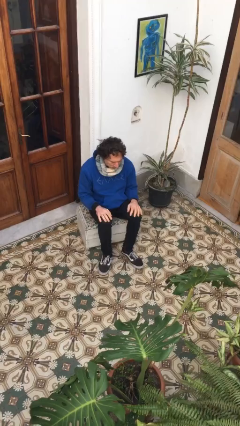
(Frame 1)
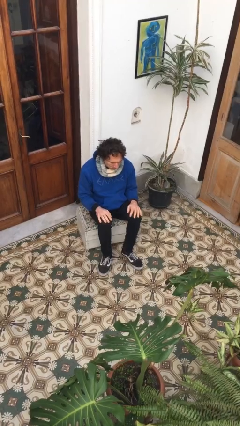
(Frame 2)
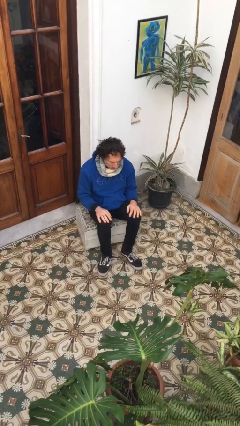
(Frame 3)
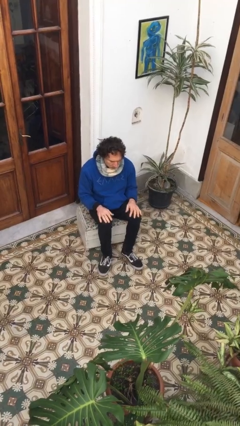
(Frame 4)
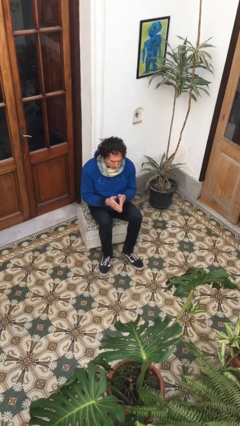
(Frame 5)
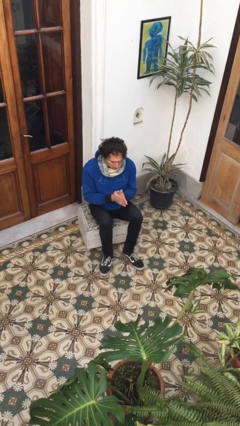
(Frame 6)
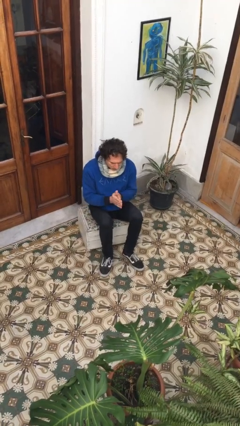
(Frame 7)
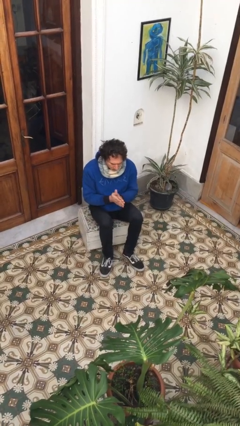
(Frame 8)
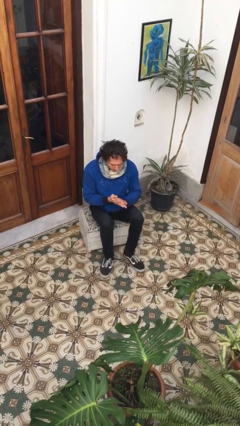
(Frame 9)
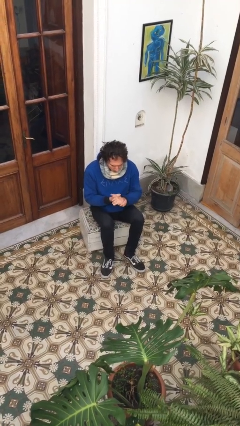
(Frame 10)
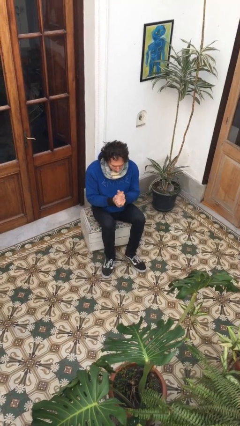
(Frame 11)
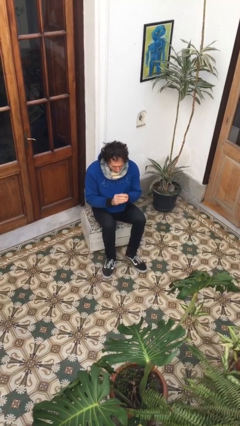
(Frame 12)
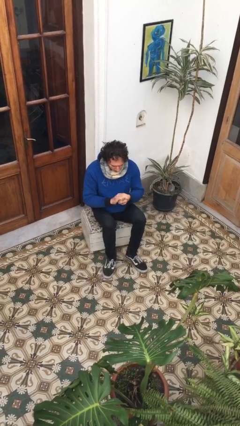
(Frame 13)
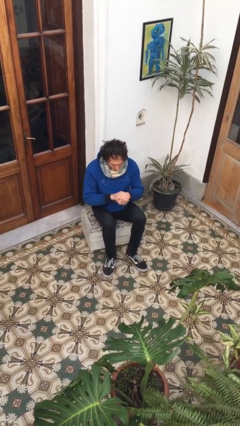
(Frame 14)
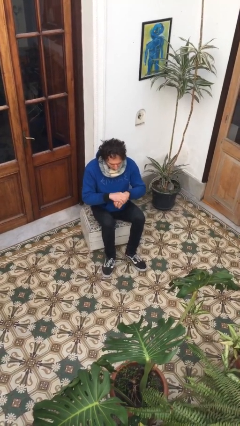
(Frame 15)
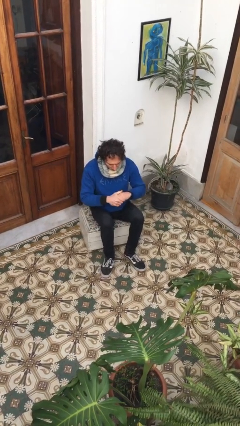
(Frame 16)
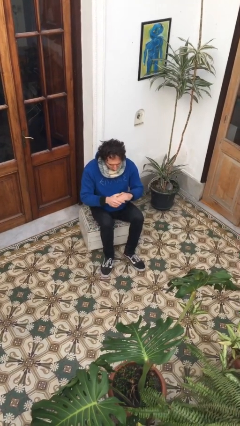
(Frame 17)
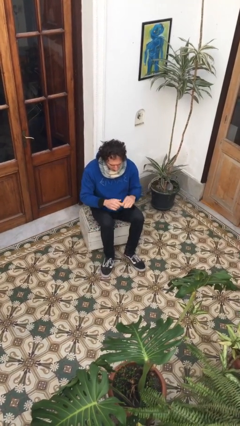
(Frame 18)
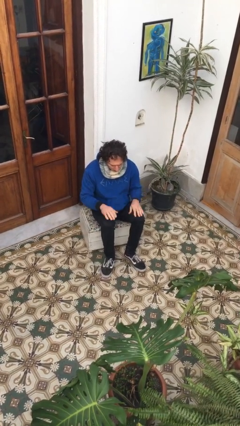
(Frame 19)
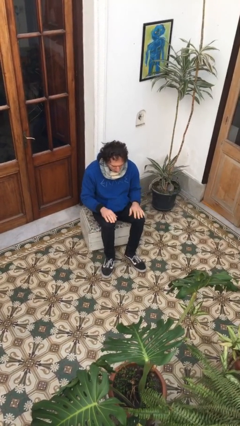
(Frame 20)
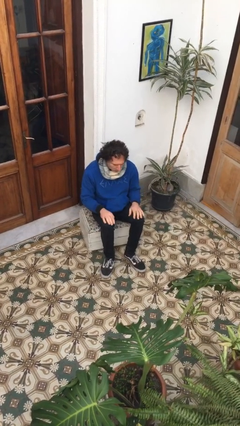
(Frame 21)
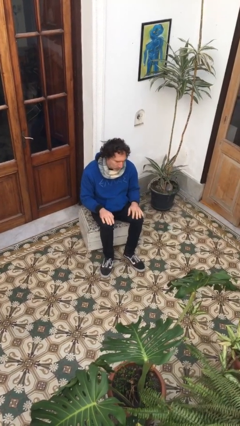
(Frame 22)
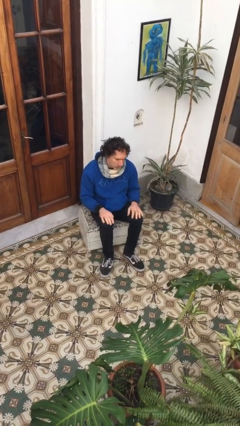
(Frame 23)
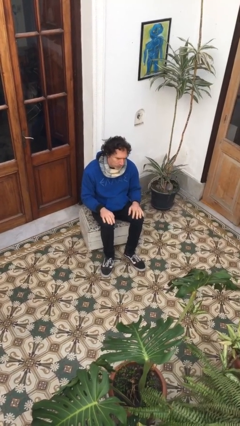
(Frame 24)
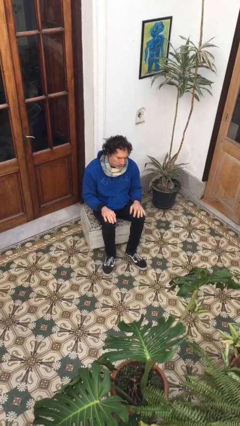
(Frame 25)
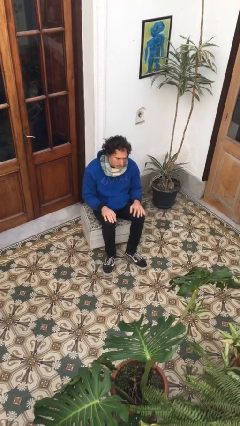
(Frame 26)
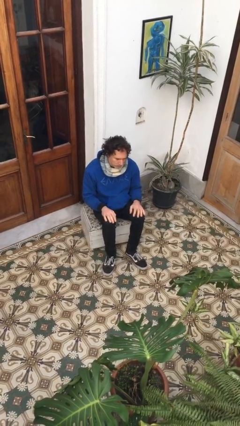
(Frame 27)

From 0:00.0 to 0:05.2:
person looks at hands in lap

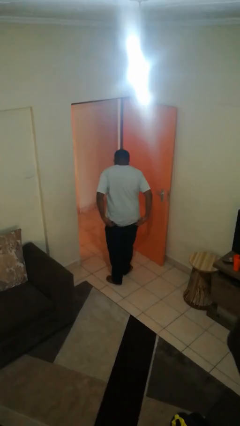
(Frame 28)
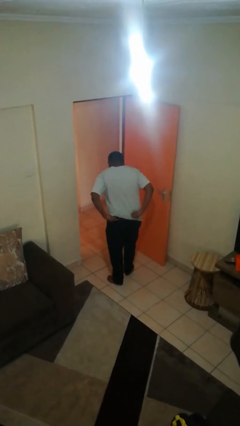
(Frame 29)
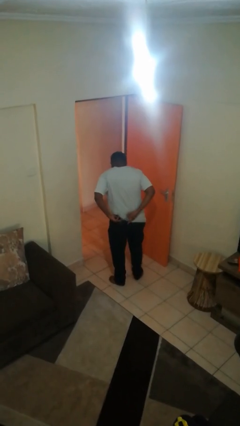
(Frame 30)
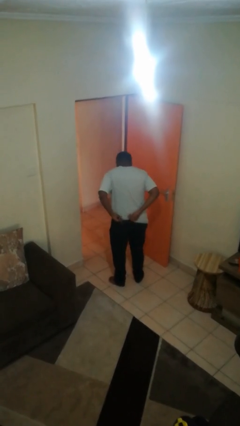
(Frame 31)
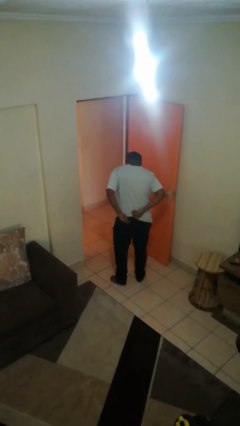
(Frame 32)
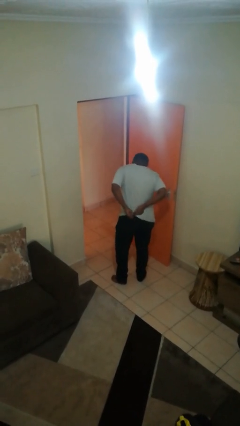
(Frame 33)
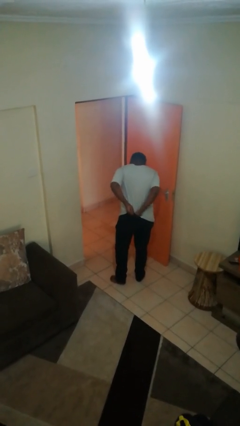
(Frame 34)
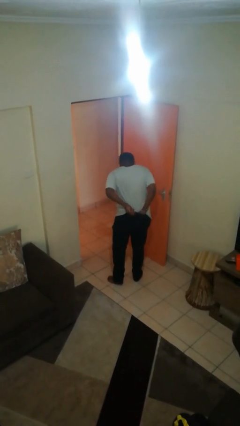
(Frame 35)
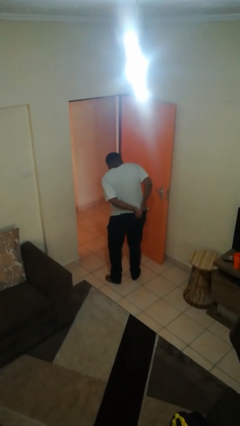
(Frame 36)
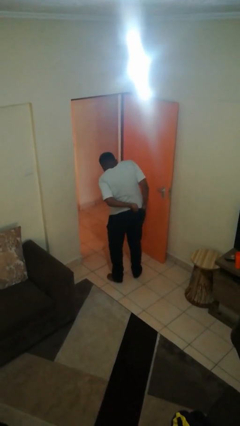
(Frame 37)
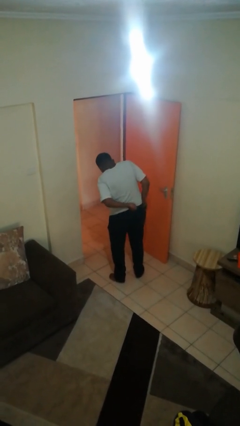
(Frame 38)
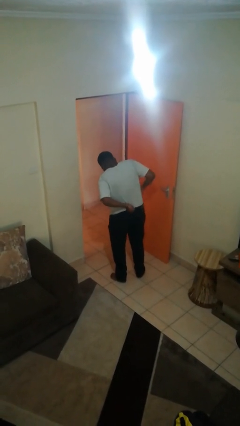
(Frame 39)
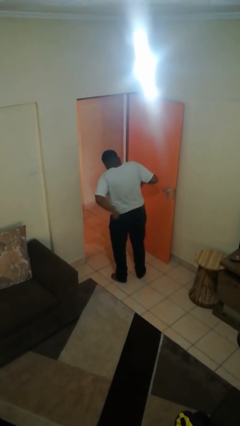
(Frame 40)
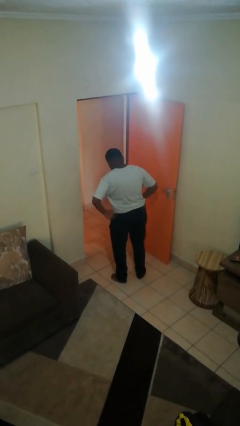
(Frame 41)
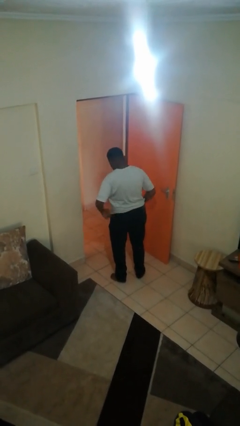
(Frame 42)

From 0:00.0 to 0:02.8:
person tucks in shirt

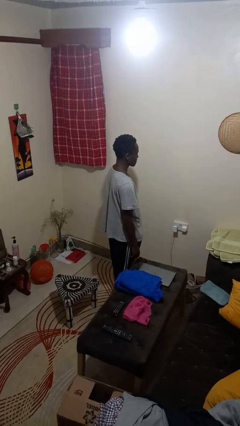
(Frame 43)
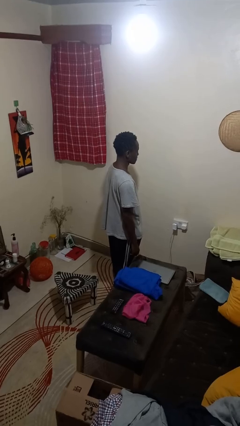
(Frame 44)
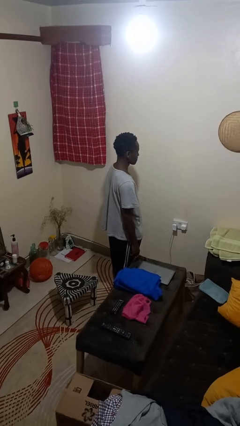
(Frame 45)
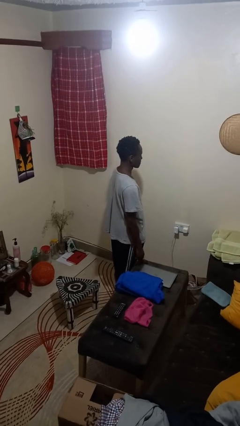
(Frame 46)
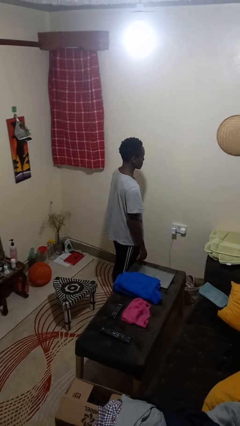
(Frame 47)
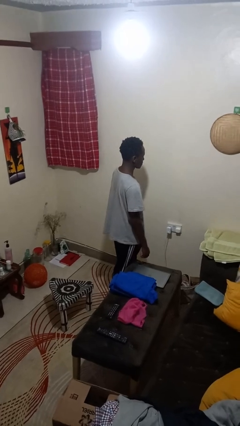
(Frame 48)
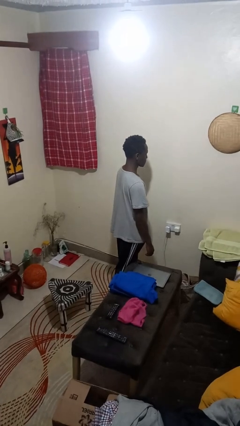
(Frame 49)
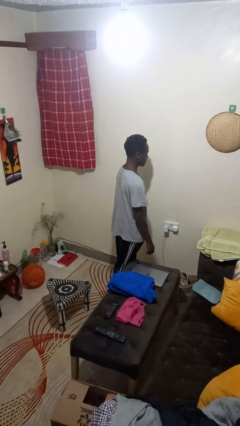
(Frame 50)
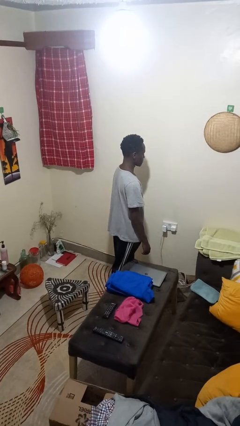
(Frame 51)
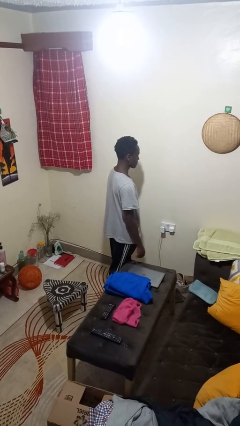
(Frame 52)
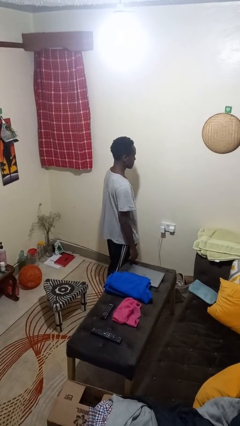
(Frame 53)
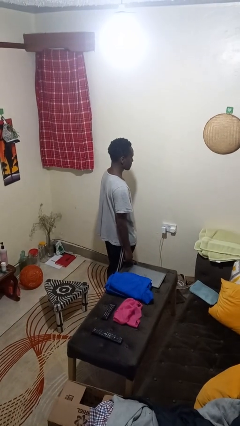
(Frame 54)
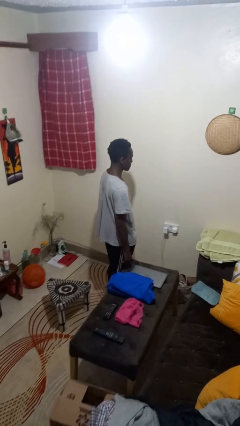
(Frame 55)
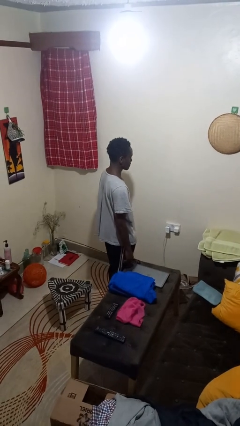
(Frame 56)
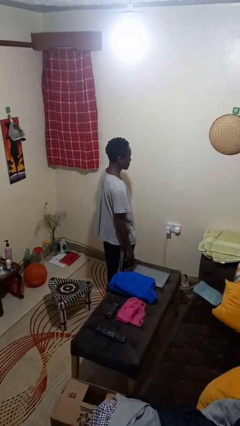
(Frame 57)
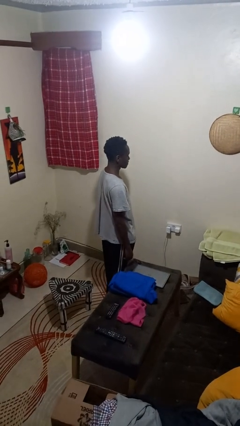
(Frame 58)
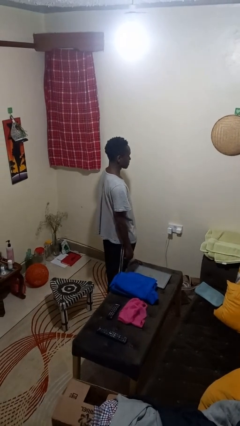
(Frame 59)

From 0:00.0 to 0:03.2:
person bumps into table

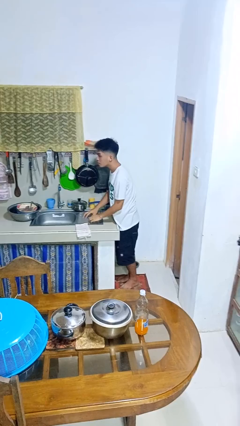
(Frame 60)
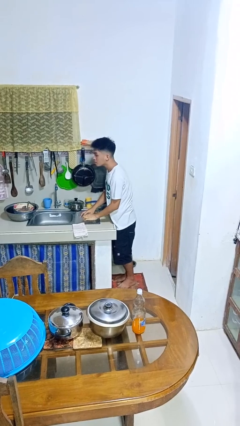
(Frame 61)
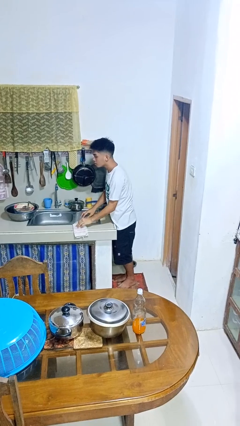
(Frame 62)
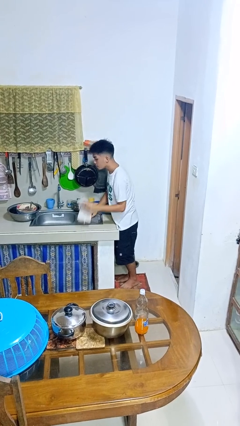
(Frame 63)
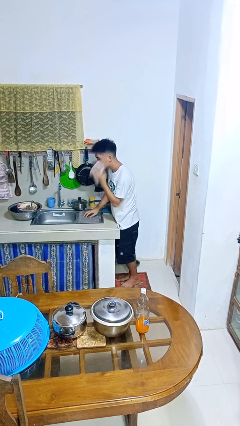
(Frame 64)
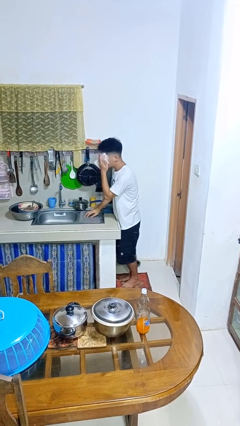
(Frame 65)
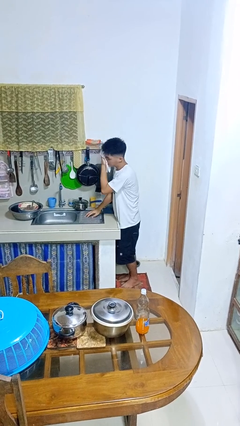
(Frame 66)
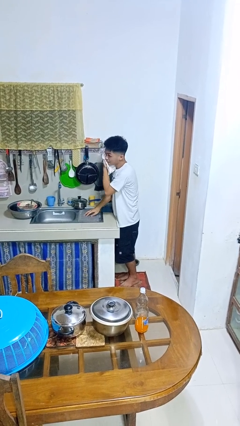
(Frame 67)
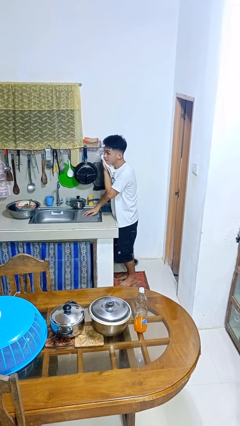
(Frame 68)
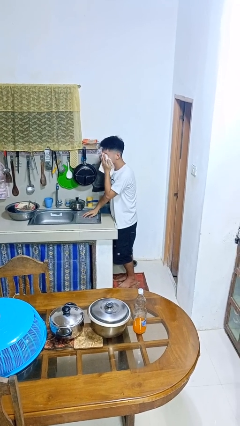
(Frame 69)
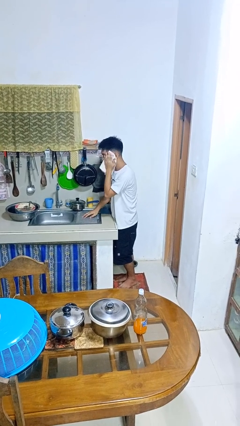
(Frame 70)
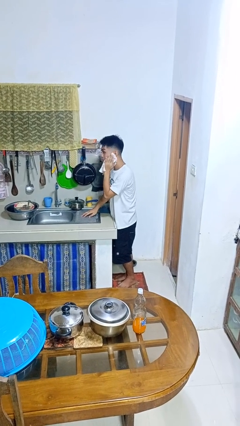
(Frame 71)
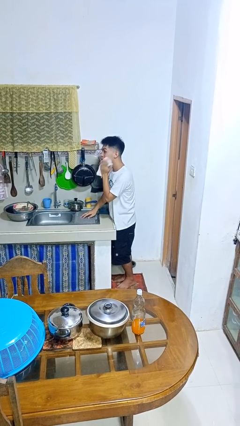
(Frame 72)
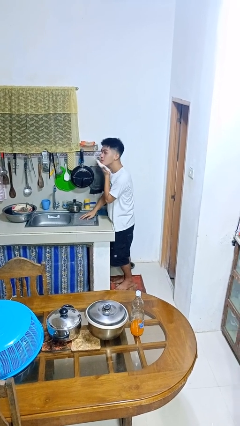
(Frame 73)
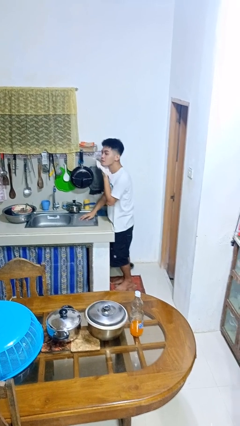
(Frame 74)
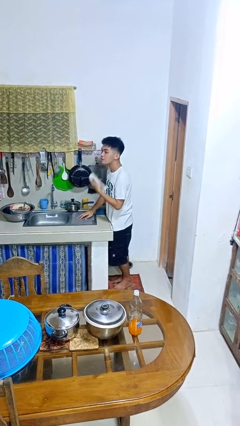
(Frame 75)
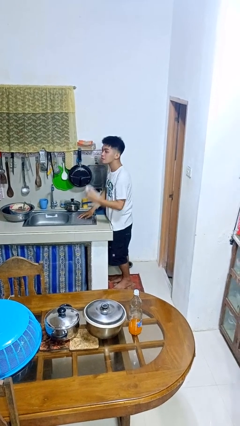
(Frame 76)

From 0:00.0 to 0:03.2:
person dries face with towel

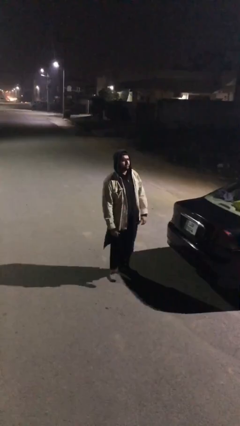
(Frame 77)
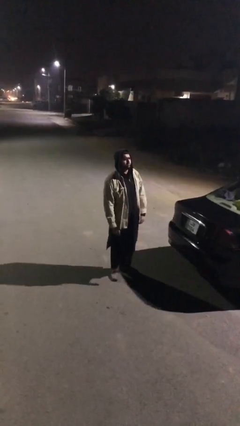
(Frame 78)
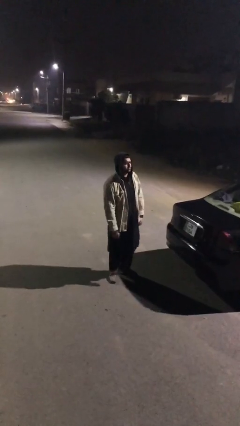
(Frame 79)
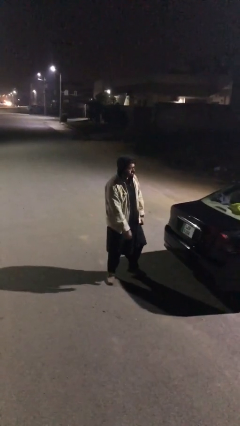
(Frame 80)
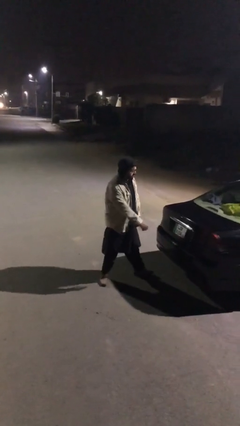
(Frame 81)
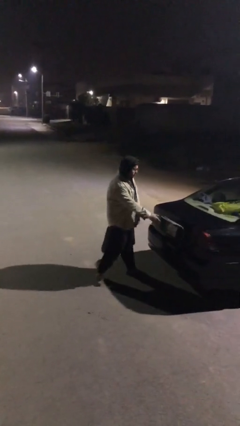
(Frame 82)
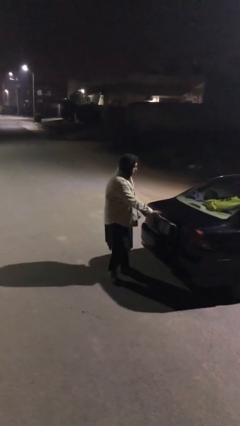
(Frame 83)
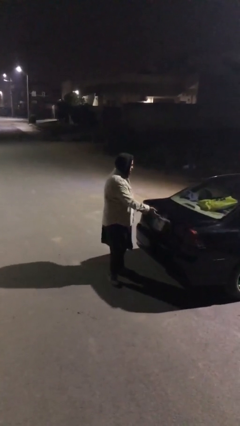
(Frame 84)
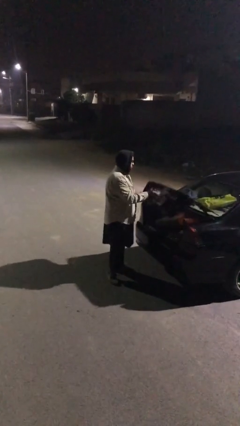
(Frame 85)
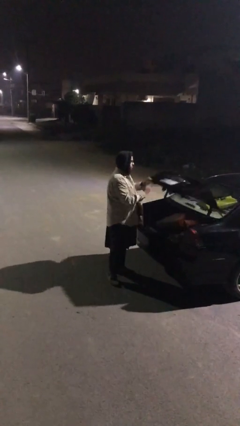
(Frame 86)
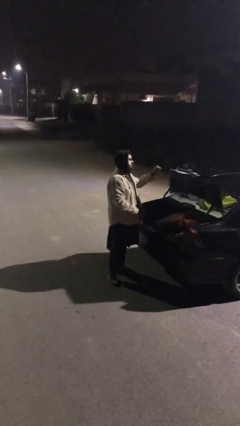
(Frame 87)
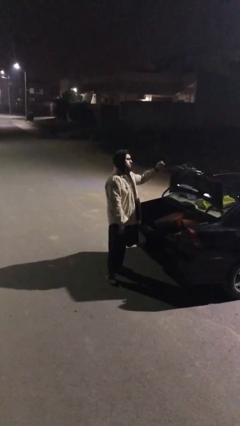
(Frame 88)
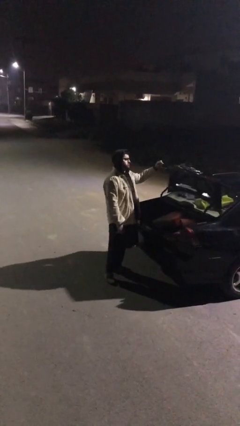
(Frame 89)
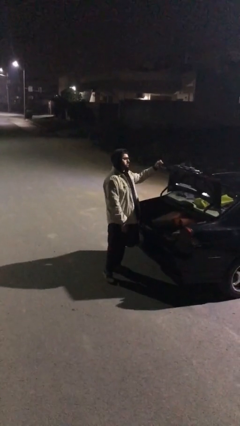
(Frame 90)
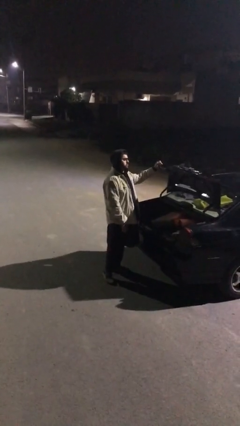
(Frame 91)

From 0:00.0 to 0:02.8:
person opens car trunk

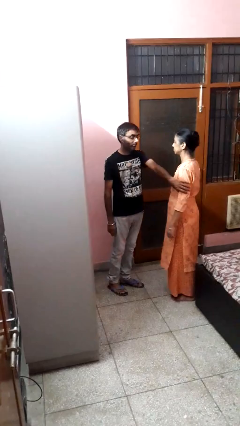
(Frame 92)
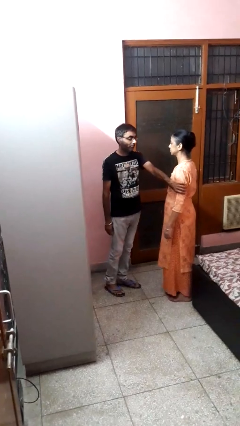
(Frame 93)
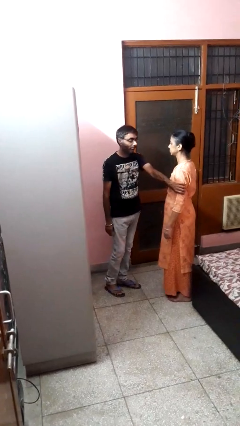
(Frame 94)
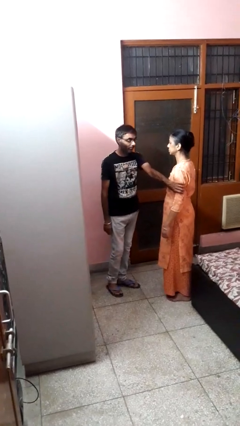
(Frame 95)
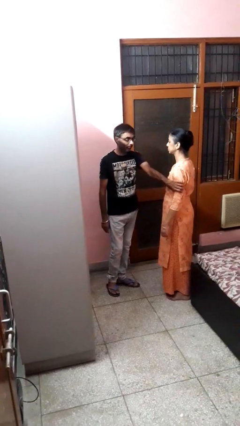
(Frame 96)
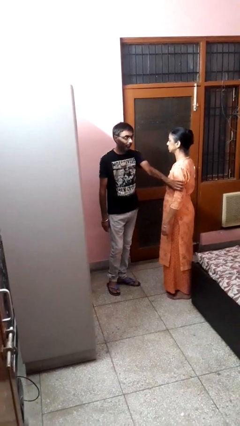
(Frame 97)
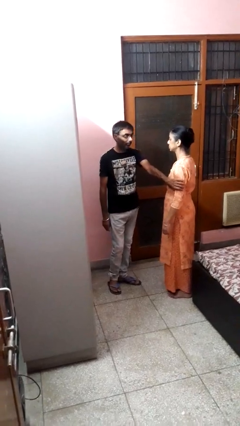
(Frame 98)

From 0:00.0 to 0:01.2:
person grabs person by bicep
